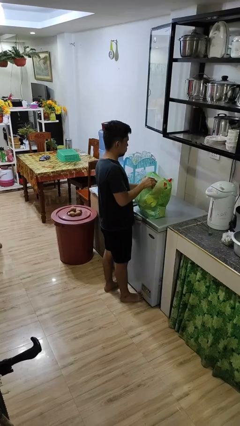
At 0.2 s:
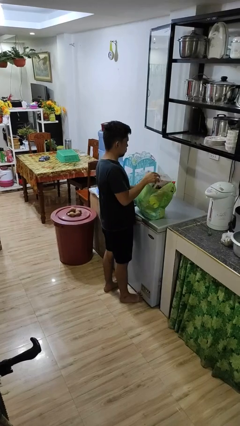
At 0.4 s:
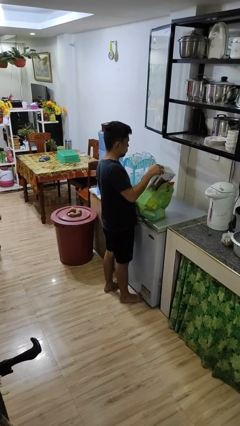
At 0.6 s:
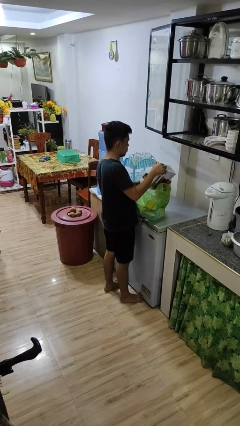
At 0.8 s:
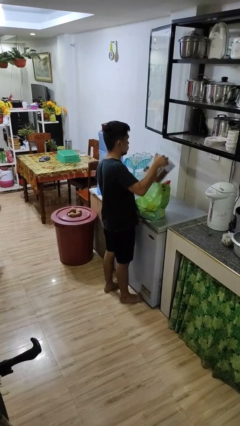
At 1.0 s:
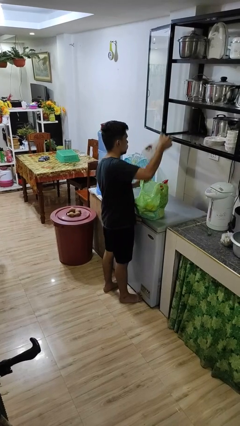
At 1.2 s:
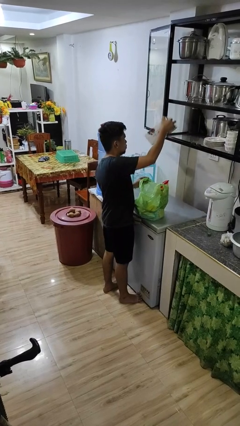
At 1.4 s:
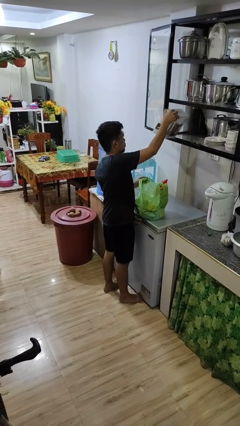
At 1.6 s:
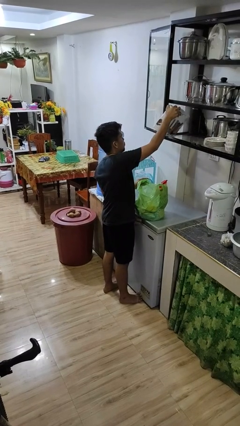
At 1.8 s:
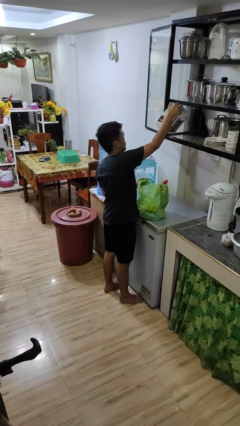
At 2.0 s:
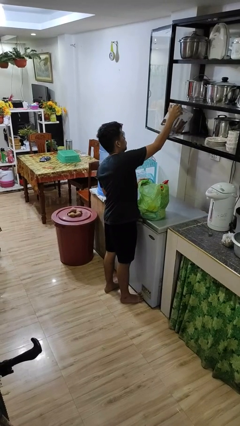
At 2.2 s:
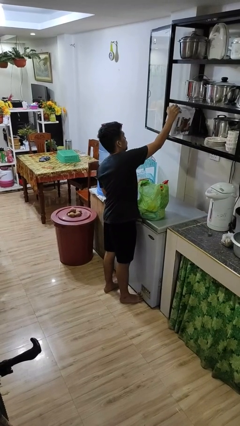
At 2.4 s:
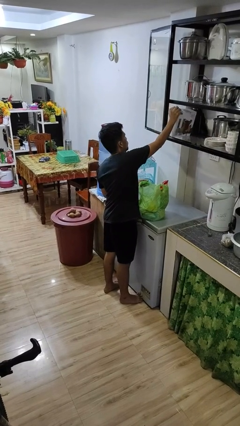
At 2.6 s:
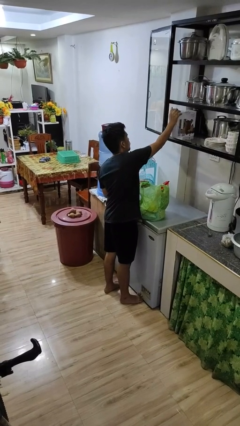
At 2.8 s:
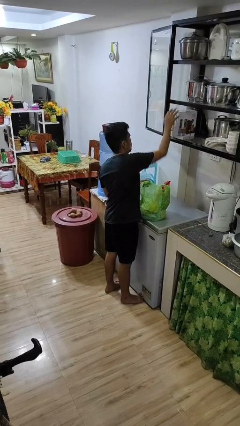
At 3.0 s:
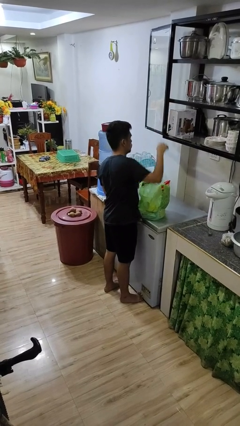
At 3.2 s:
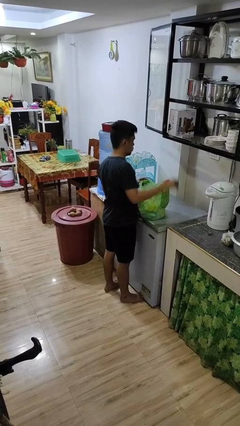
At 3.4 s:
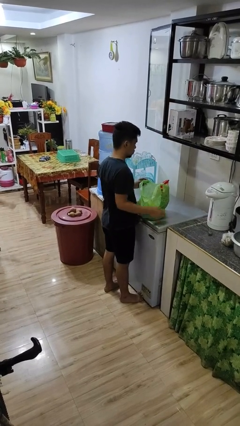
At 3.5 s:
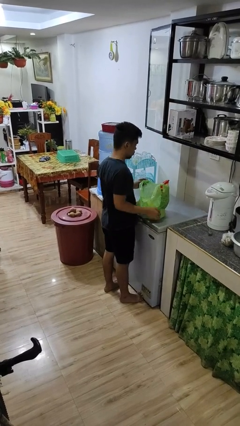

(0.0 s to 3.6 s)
person loads groceries into cabinet

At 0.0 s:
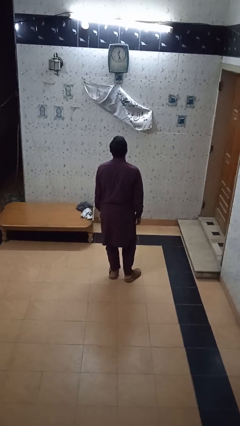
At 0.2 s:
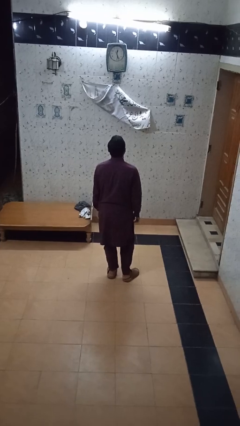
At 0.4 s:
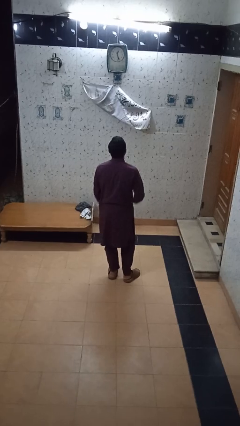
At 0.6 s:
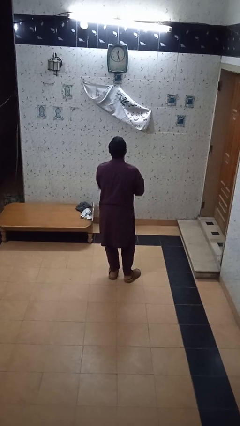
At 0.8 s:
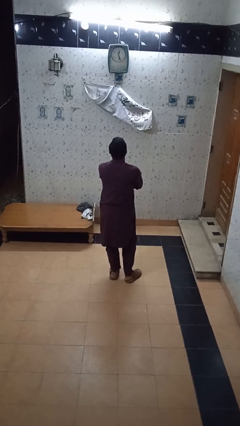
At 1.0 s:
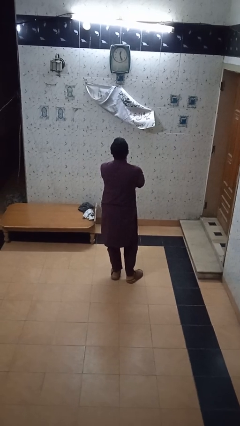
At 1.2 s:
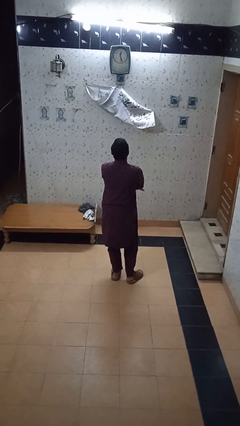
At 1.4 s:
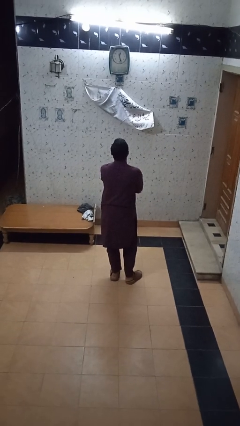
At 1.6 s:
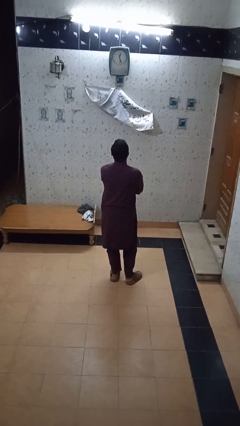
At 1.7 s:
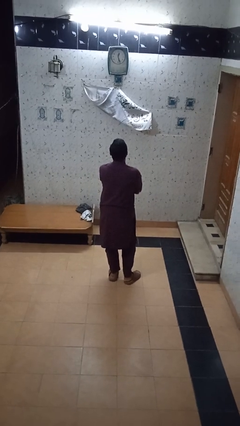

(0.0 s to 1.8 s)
person crosses arms

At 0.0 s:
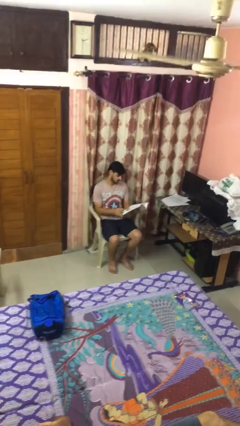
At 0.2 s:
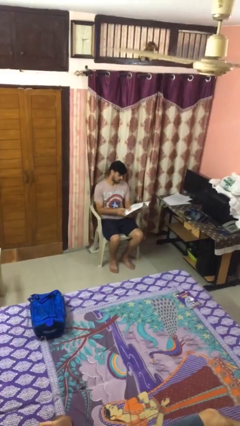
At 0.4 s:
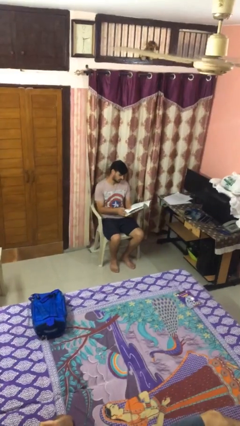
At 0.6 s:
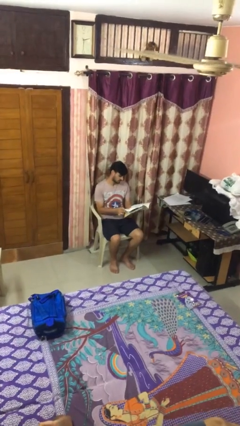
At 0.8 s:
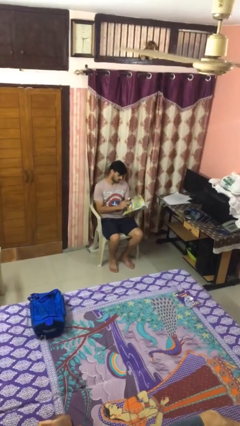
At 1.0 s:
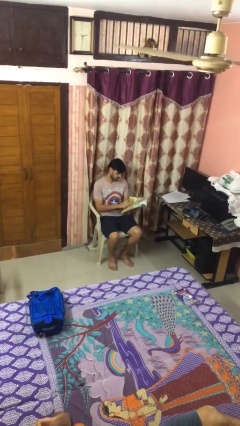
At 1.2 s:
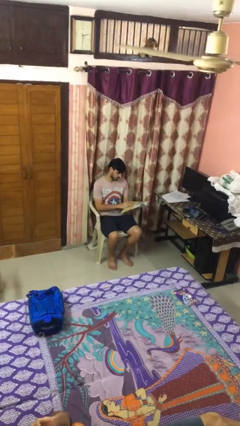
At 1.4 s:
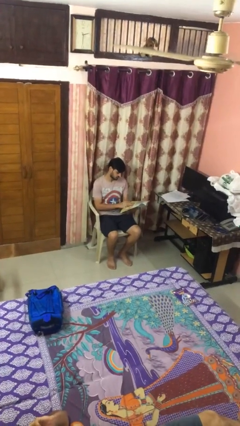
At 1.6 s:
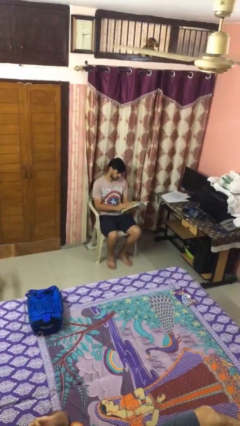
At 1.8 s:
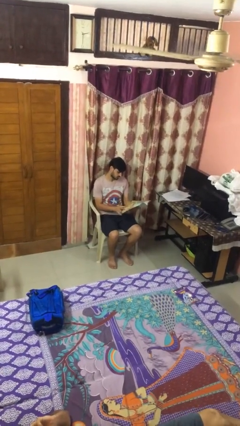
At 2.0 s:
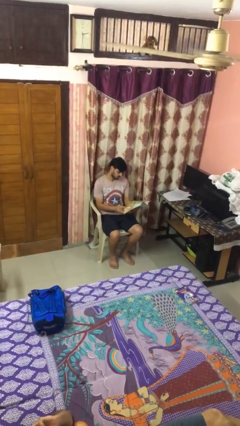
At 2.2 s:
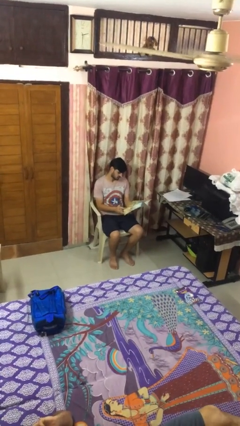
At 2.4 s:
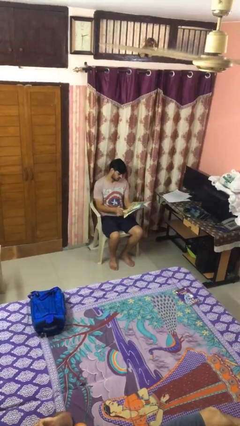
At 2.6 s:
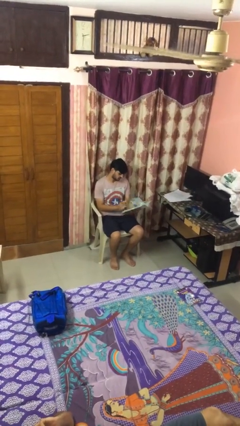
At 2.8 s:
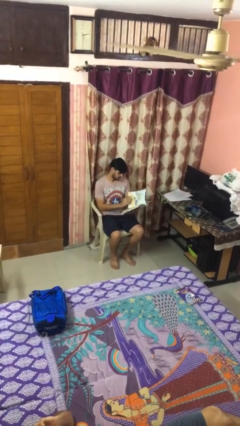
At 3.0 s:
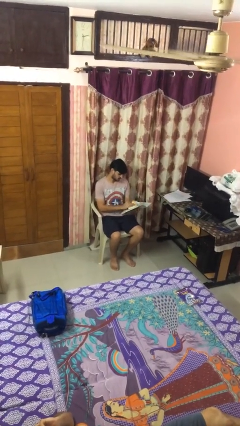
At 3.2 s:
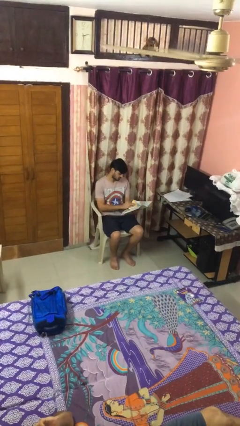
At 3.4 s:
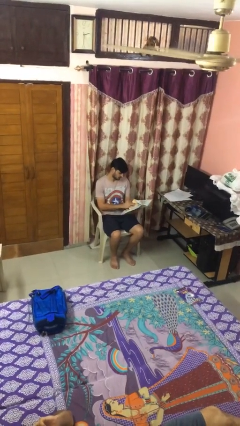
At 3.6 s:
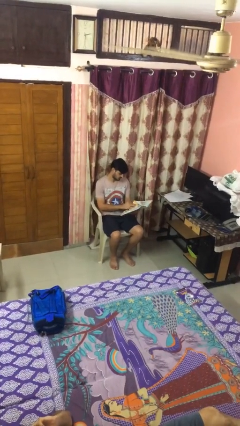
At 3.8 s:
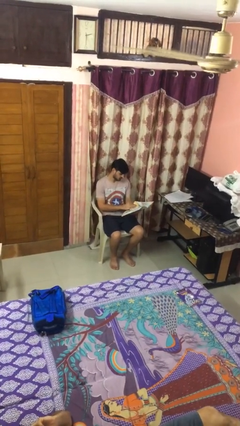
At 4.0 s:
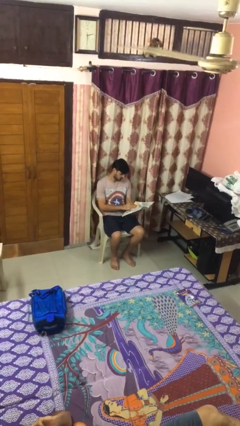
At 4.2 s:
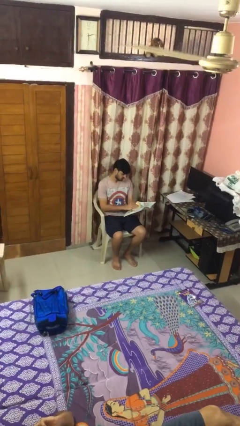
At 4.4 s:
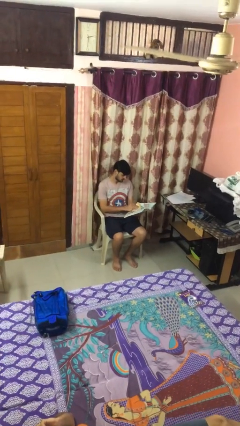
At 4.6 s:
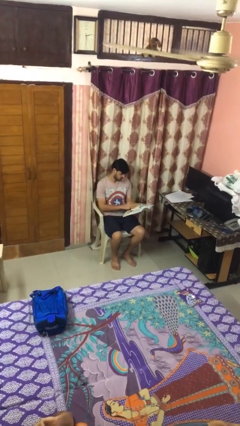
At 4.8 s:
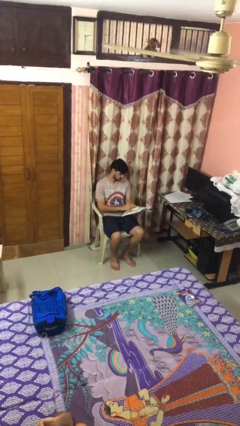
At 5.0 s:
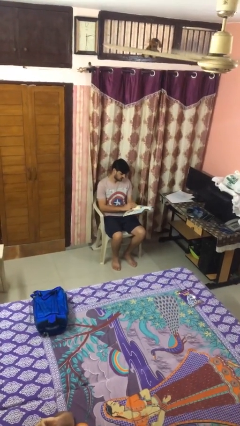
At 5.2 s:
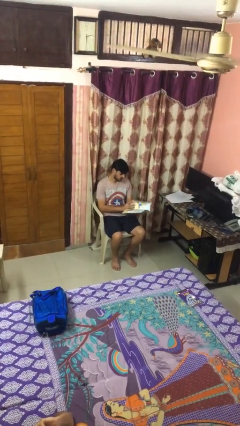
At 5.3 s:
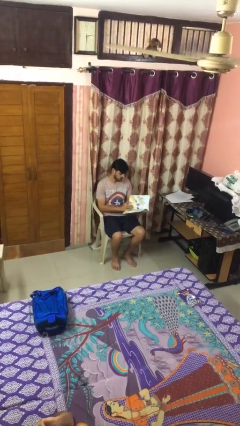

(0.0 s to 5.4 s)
person reads magazine

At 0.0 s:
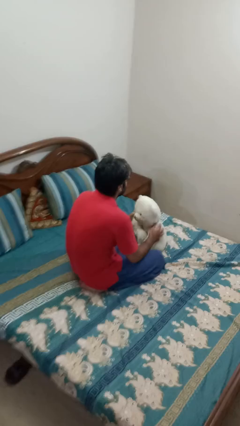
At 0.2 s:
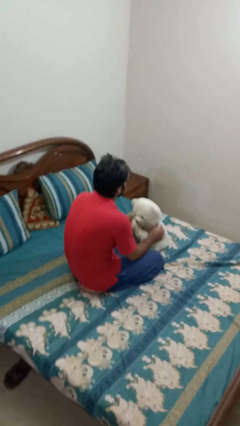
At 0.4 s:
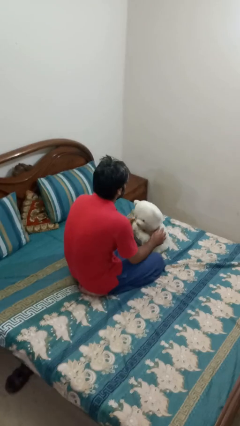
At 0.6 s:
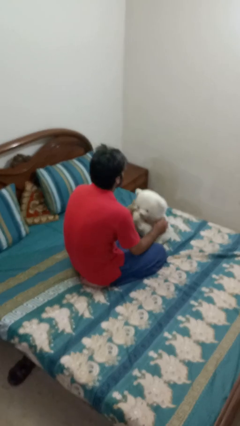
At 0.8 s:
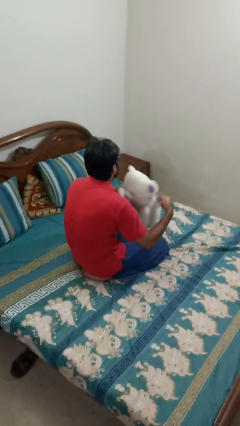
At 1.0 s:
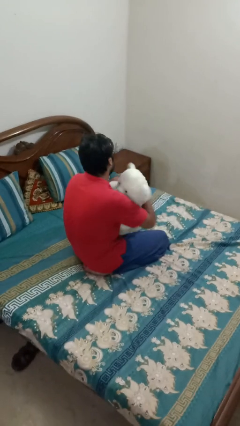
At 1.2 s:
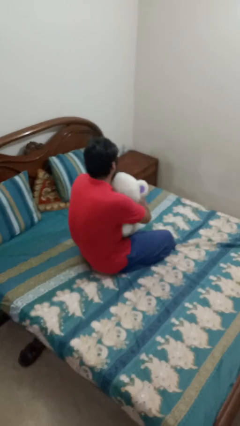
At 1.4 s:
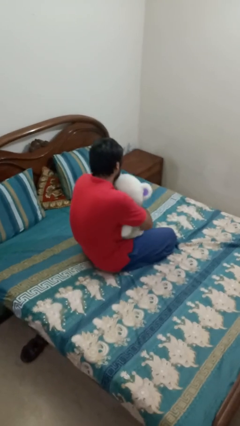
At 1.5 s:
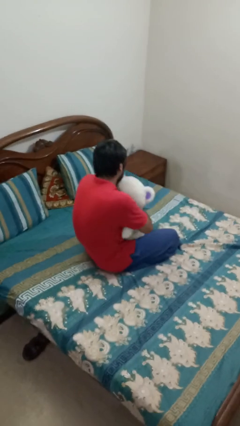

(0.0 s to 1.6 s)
person hugs stuffed animal

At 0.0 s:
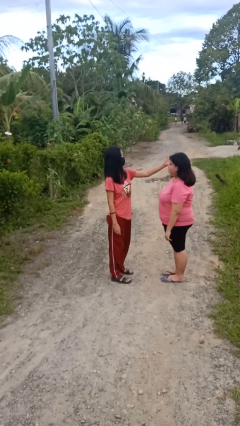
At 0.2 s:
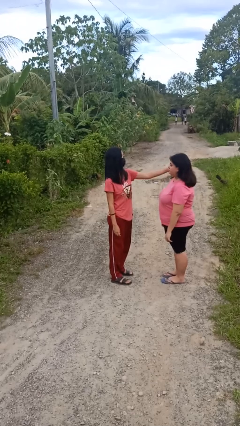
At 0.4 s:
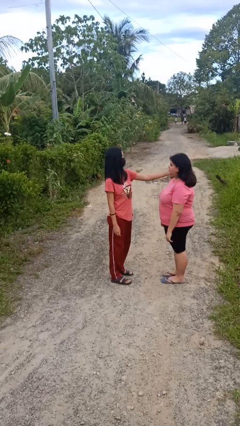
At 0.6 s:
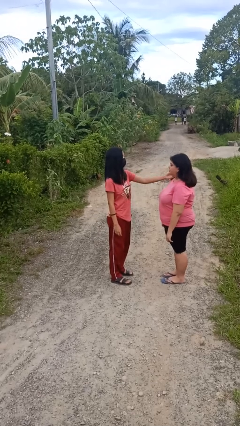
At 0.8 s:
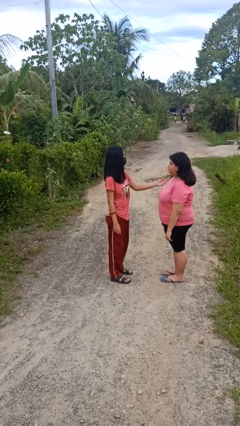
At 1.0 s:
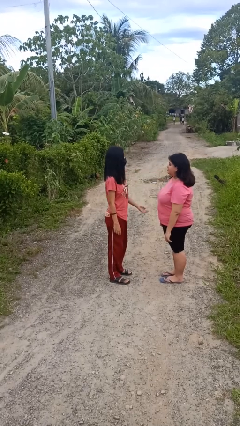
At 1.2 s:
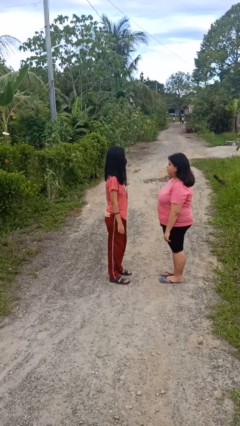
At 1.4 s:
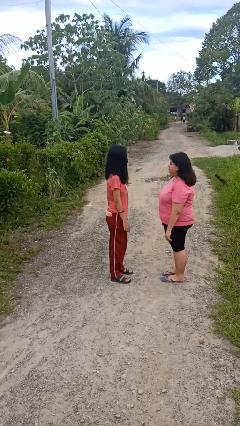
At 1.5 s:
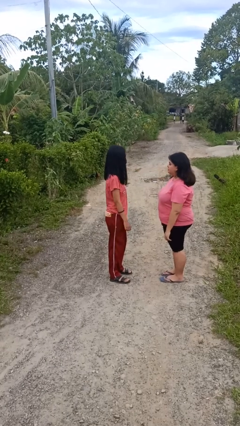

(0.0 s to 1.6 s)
person touches face of person

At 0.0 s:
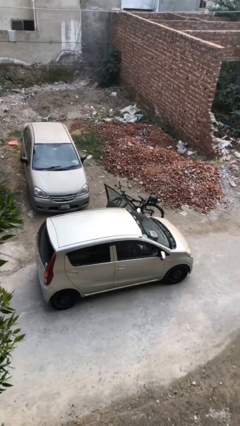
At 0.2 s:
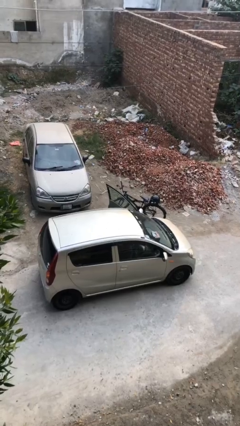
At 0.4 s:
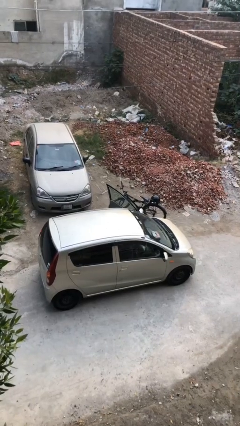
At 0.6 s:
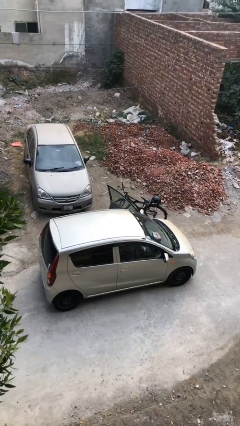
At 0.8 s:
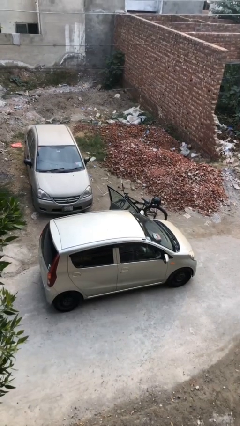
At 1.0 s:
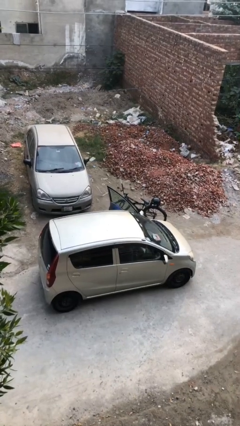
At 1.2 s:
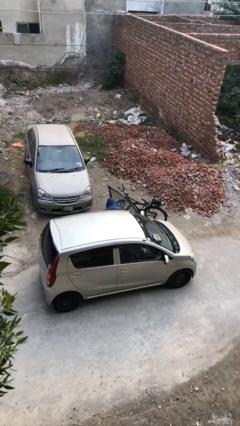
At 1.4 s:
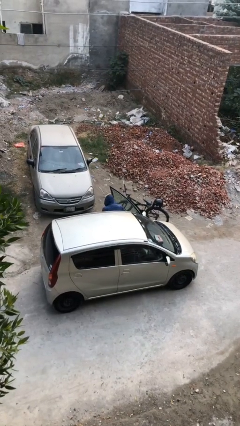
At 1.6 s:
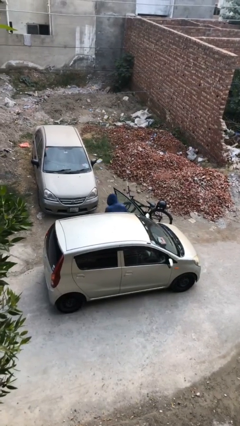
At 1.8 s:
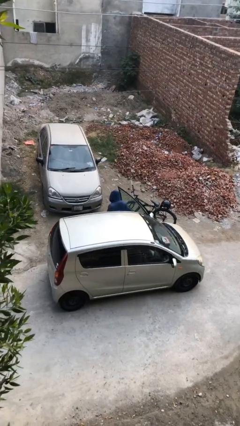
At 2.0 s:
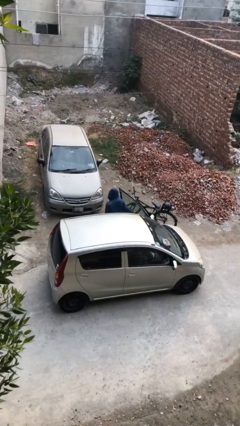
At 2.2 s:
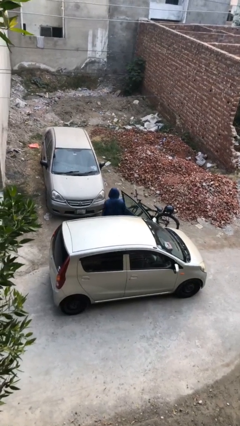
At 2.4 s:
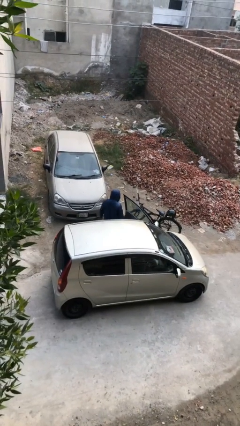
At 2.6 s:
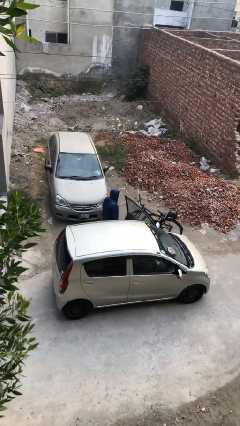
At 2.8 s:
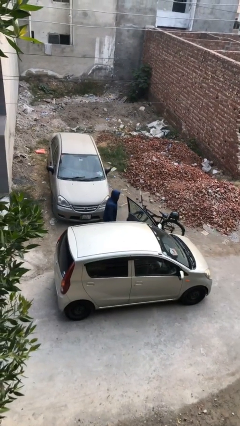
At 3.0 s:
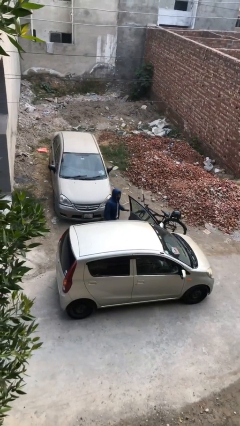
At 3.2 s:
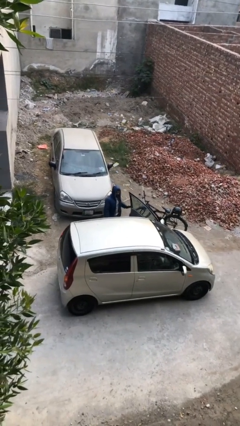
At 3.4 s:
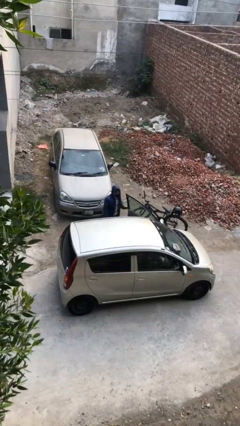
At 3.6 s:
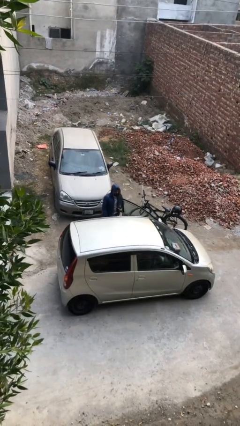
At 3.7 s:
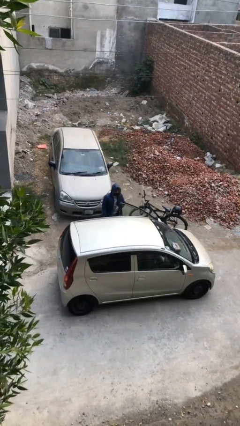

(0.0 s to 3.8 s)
person exits car
